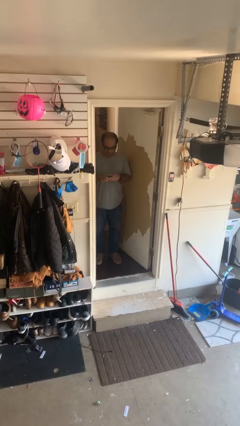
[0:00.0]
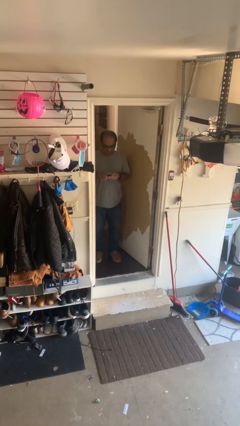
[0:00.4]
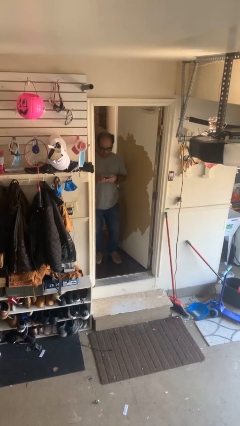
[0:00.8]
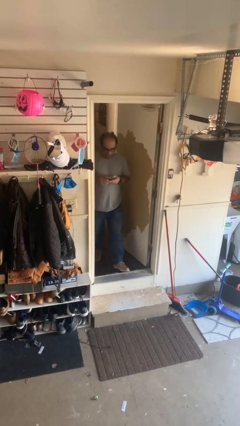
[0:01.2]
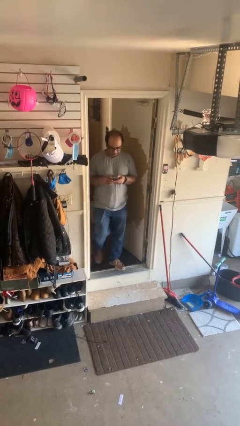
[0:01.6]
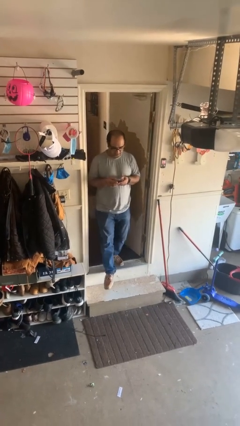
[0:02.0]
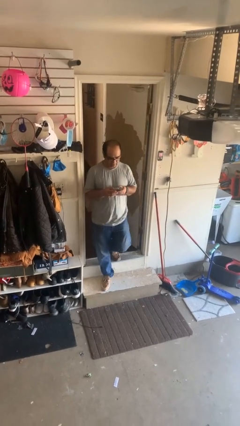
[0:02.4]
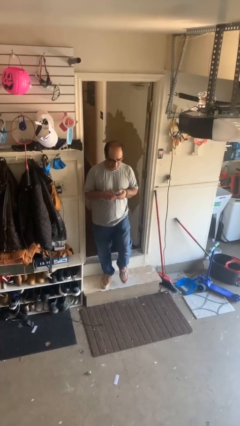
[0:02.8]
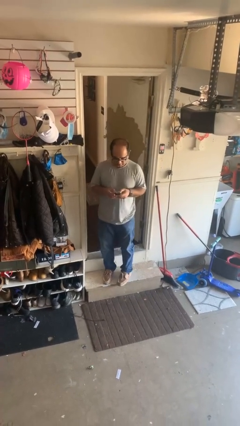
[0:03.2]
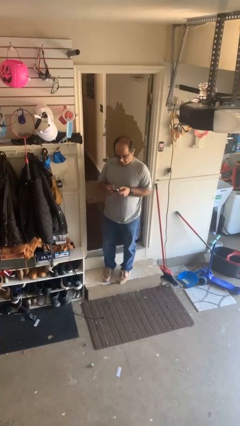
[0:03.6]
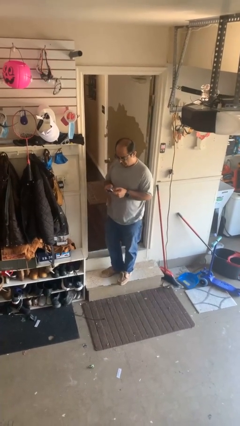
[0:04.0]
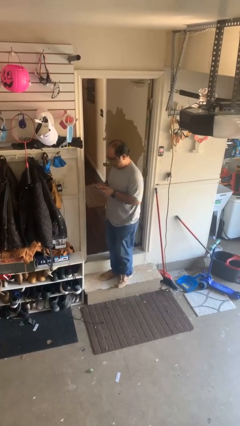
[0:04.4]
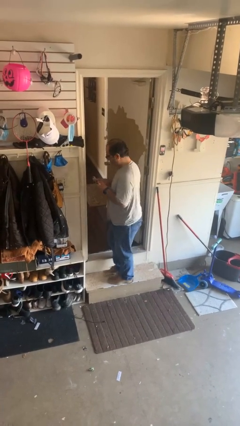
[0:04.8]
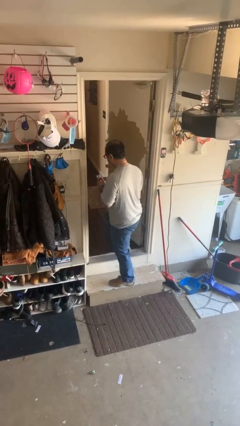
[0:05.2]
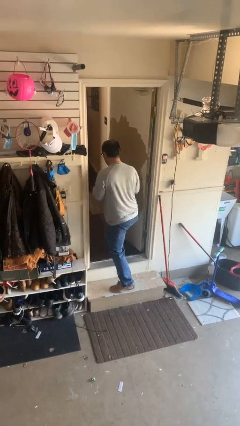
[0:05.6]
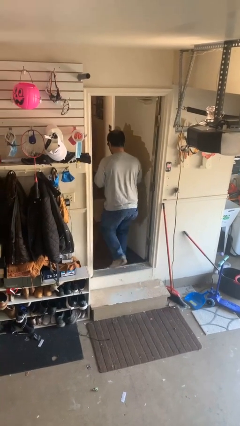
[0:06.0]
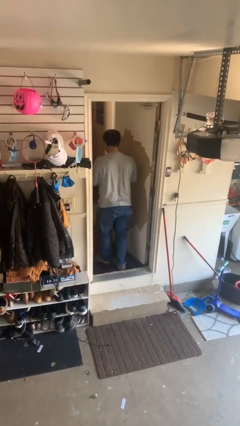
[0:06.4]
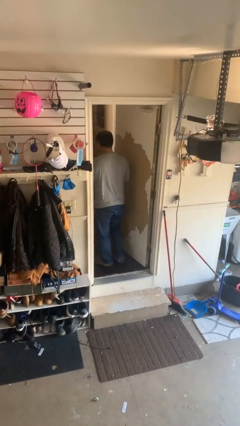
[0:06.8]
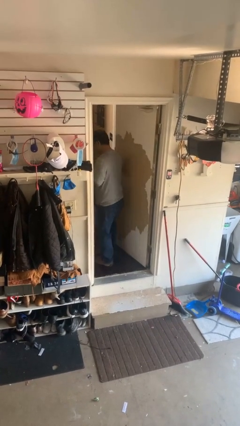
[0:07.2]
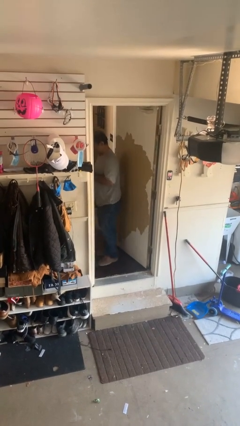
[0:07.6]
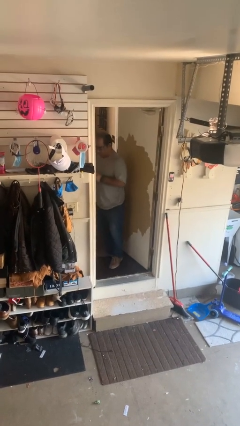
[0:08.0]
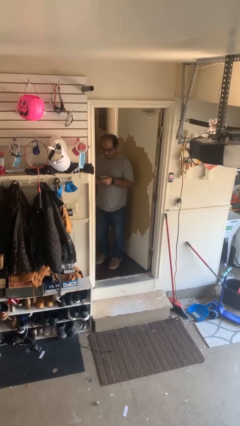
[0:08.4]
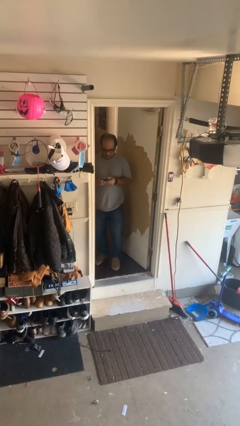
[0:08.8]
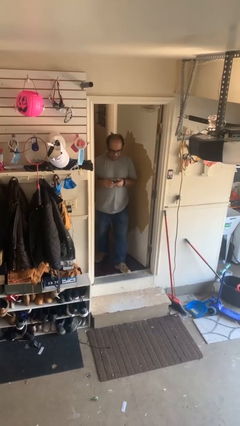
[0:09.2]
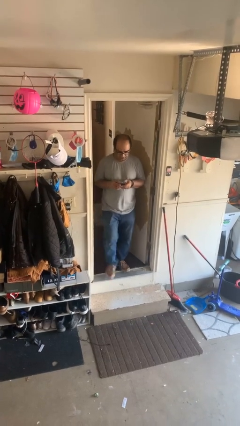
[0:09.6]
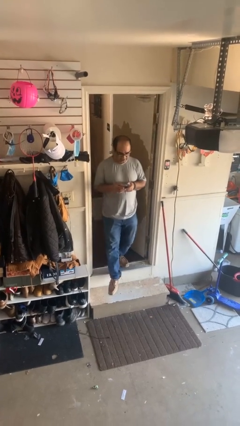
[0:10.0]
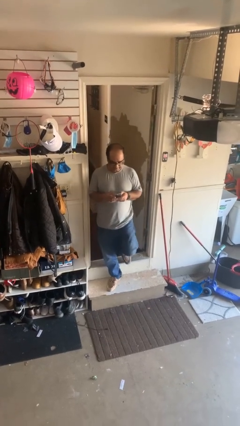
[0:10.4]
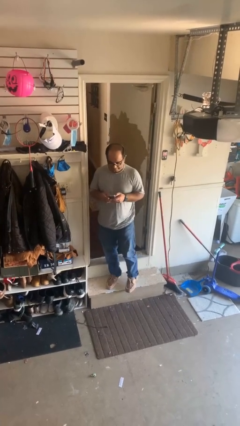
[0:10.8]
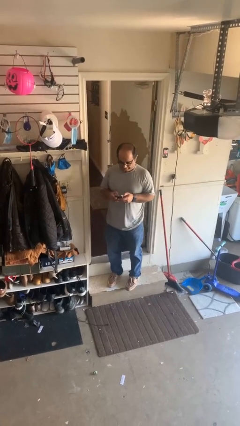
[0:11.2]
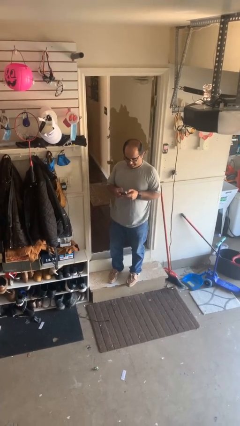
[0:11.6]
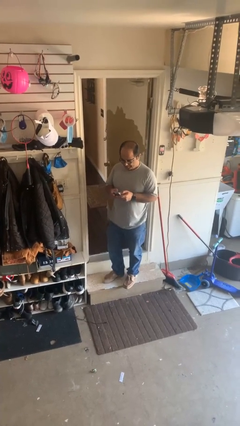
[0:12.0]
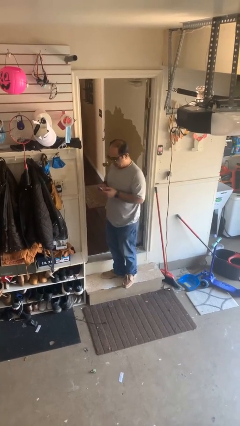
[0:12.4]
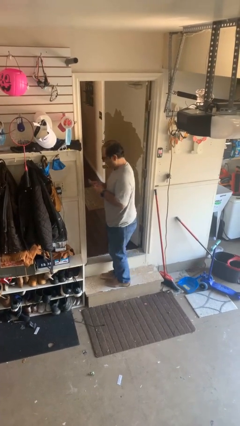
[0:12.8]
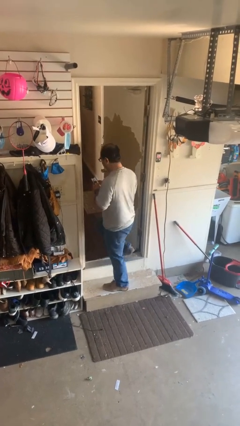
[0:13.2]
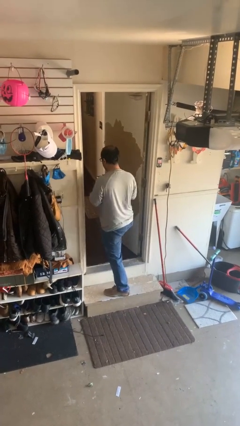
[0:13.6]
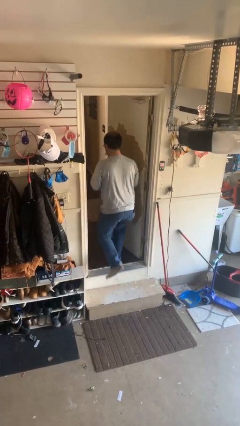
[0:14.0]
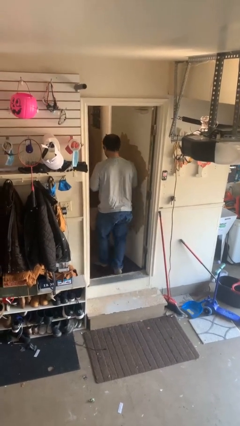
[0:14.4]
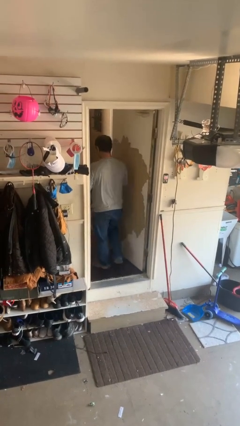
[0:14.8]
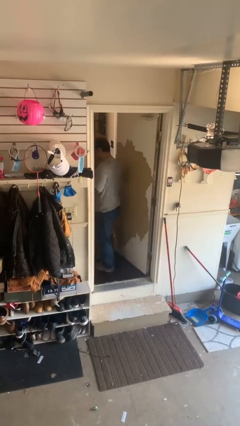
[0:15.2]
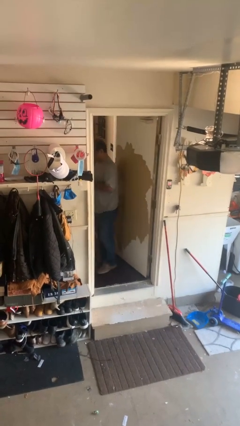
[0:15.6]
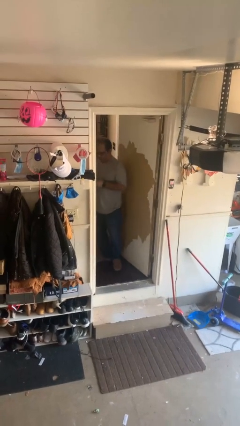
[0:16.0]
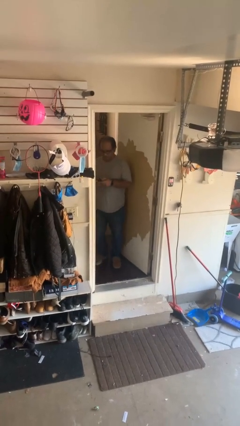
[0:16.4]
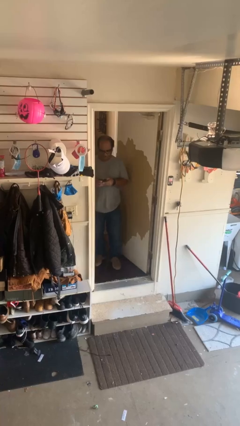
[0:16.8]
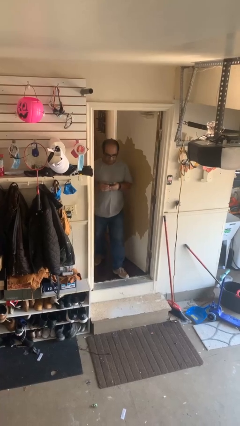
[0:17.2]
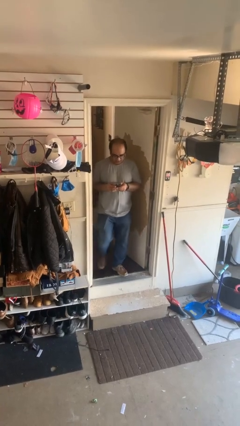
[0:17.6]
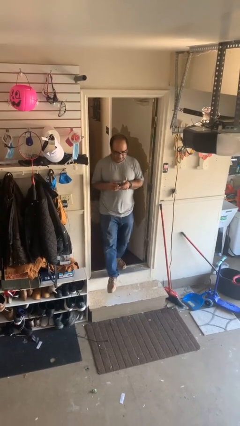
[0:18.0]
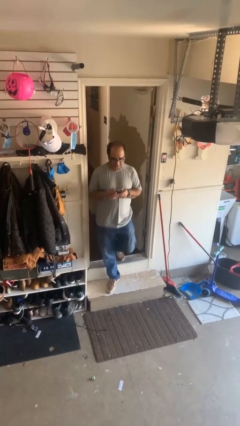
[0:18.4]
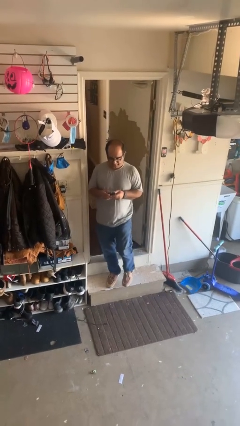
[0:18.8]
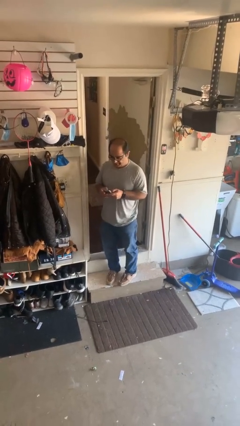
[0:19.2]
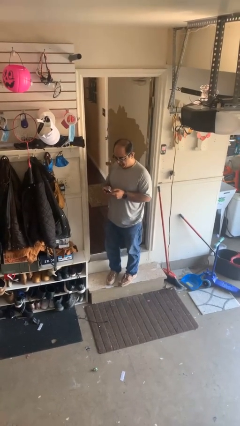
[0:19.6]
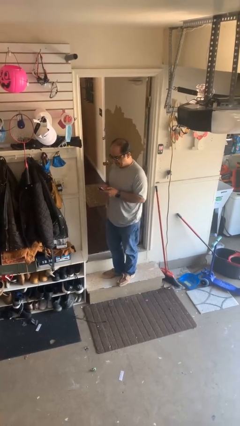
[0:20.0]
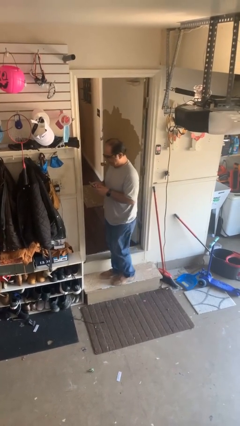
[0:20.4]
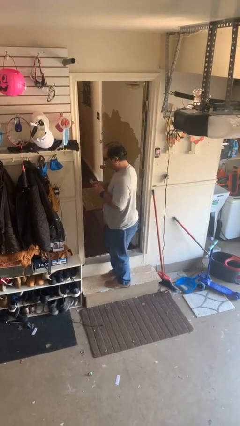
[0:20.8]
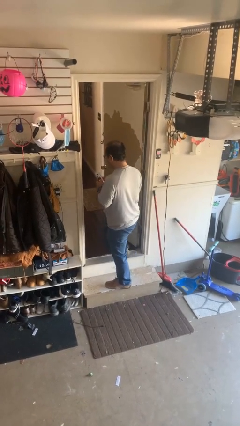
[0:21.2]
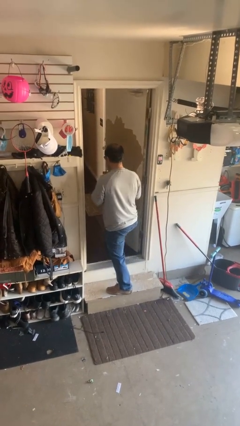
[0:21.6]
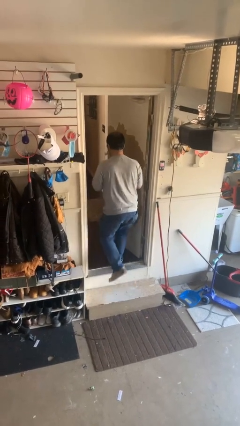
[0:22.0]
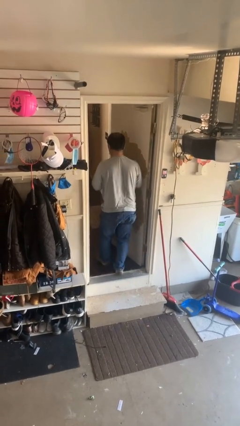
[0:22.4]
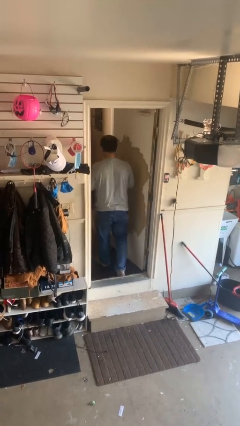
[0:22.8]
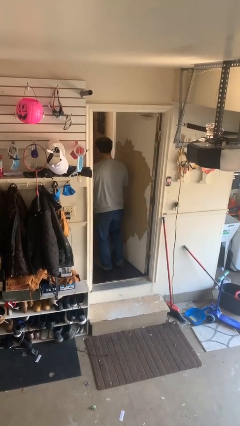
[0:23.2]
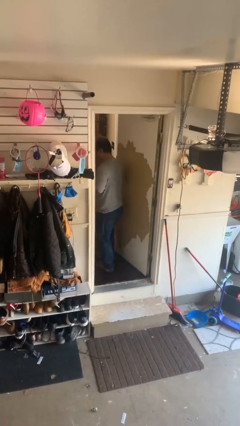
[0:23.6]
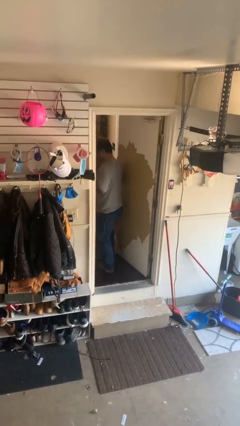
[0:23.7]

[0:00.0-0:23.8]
person texts on phone

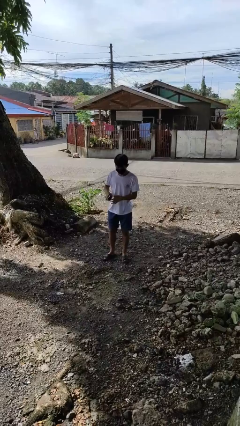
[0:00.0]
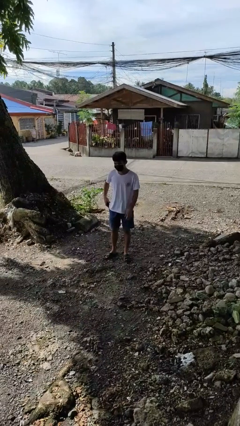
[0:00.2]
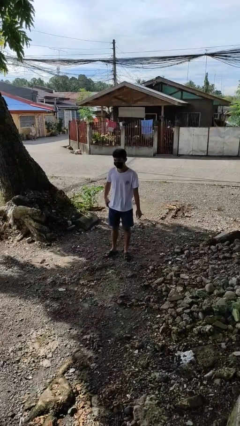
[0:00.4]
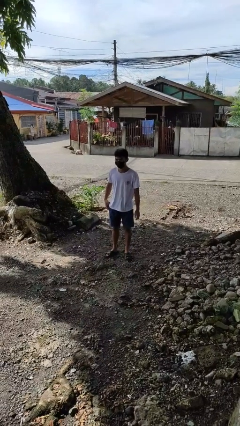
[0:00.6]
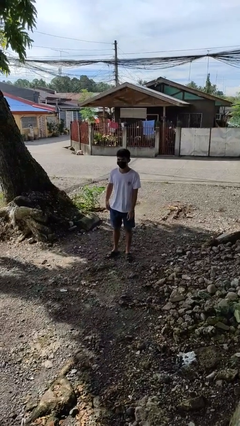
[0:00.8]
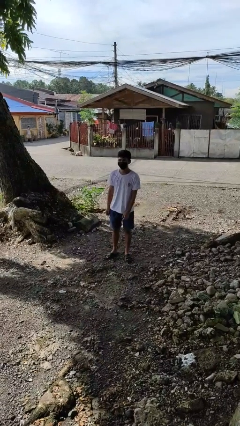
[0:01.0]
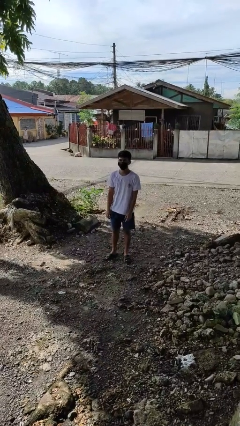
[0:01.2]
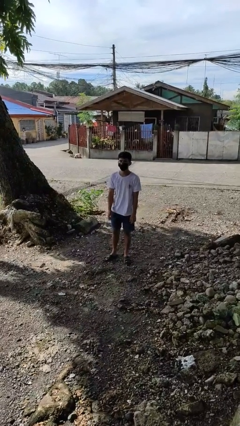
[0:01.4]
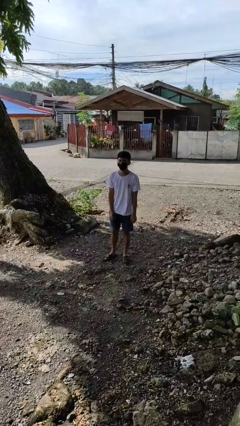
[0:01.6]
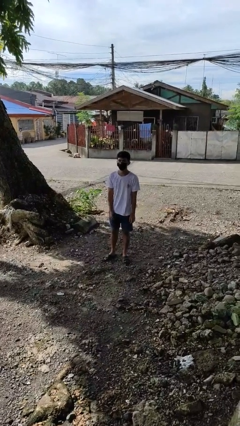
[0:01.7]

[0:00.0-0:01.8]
person puts phone into pocket

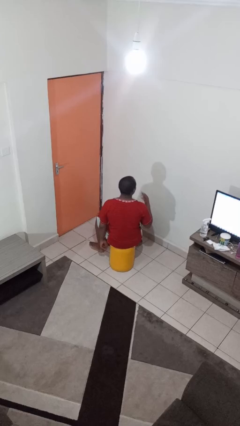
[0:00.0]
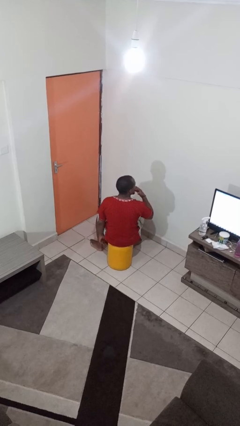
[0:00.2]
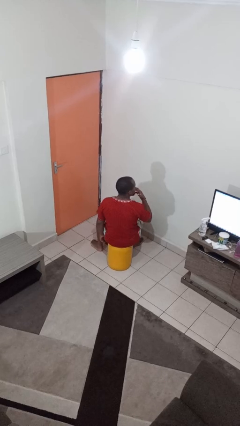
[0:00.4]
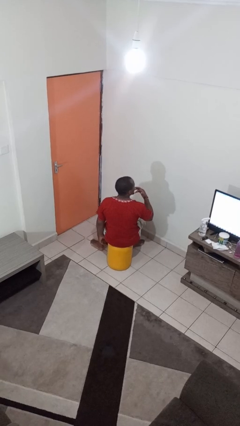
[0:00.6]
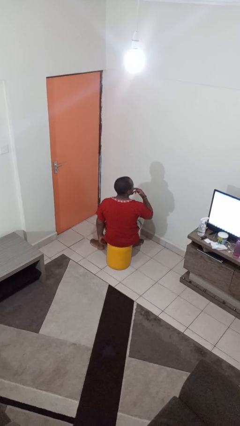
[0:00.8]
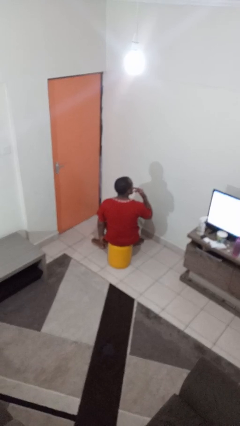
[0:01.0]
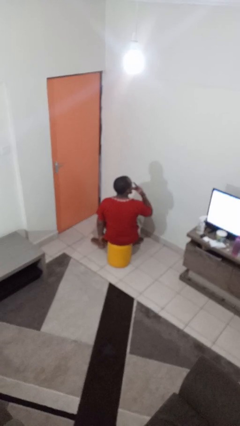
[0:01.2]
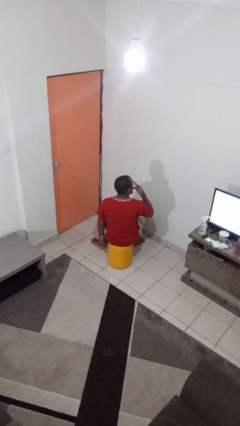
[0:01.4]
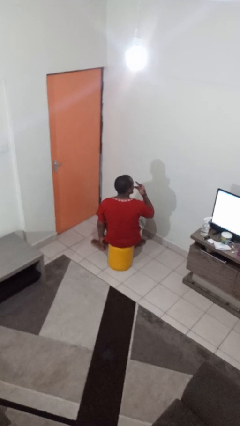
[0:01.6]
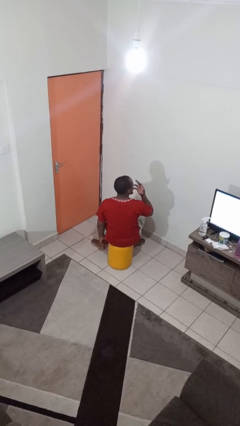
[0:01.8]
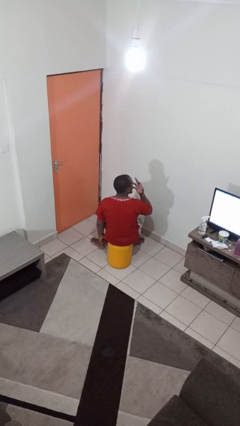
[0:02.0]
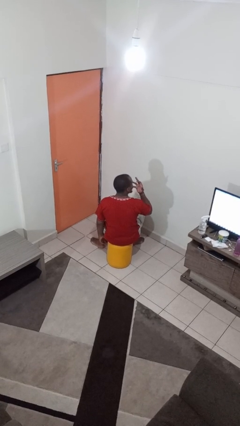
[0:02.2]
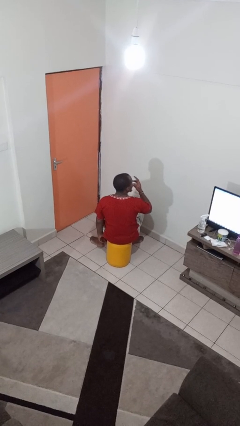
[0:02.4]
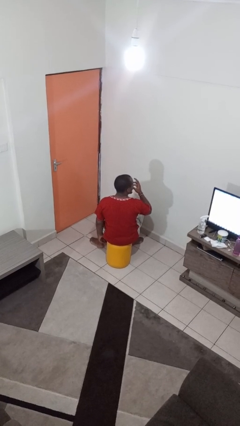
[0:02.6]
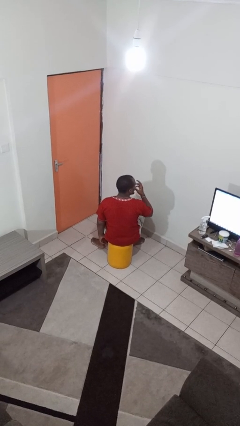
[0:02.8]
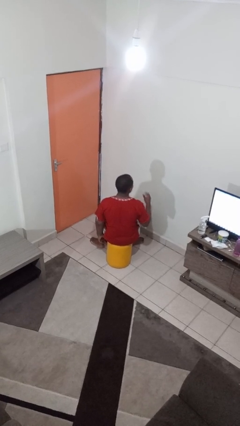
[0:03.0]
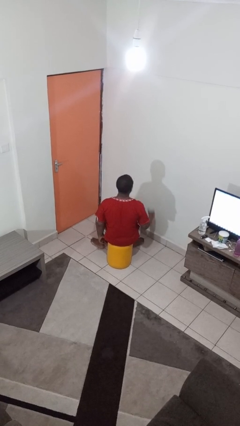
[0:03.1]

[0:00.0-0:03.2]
person licks fingers

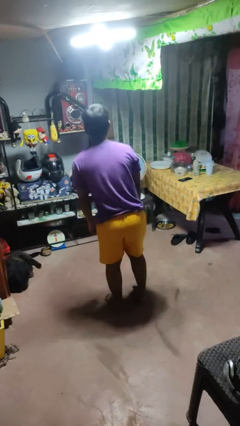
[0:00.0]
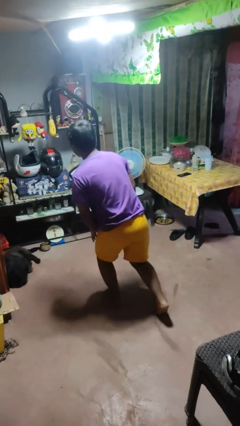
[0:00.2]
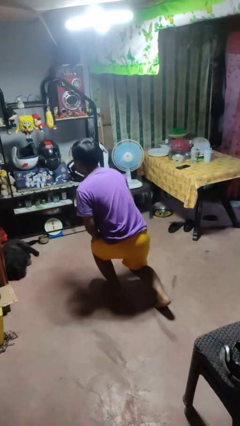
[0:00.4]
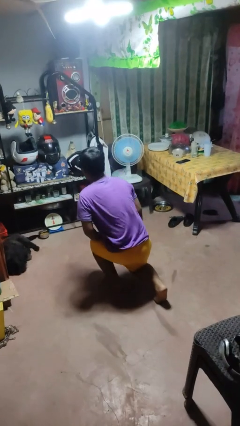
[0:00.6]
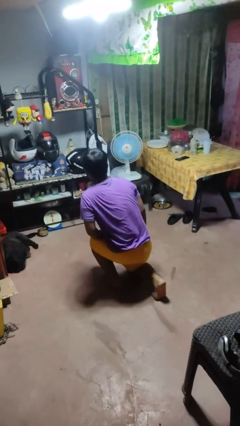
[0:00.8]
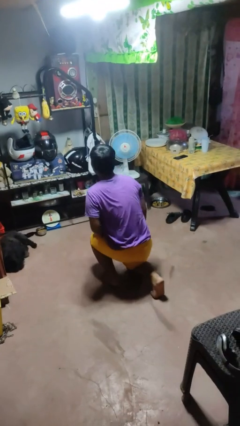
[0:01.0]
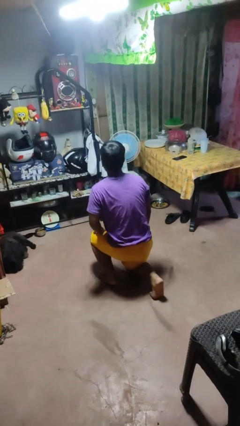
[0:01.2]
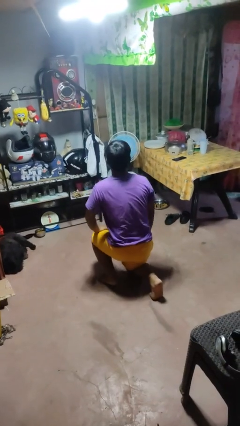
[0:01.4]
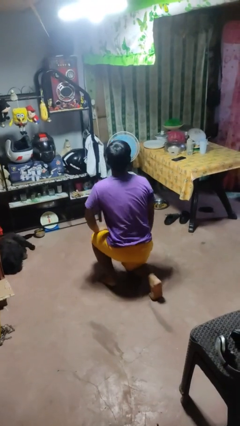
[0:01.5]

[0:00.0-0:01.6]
person kneels
